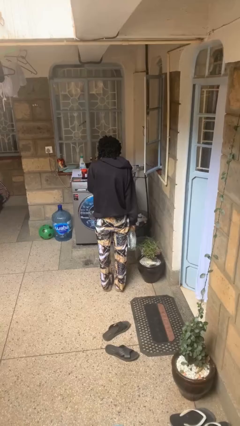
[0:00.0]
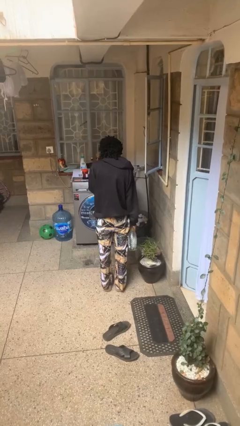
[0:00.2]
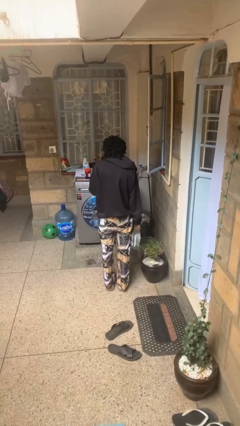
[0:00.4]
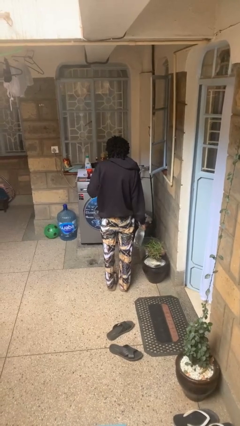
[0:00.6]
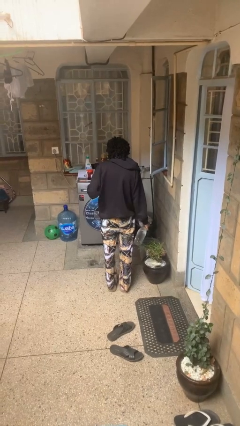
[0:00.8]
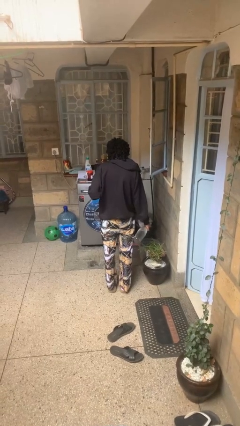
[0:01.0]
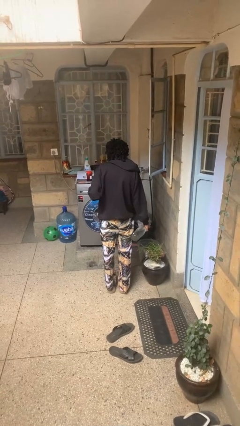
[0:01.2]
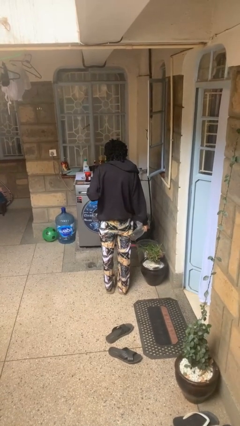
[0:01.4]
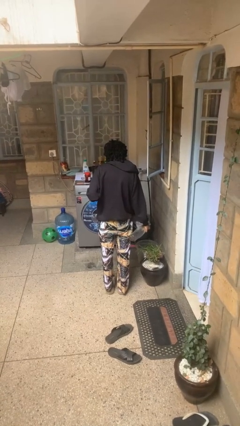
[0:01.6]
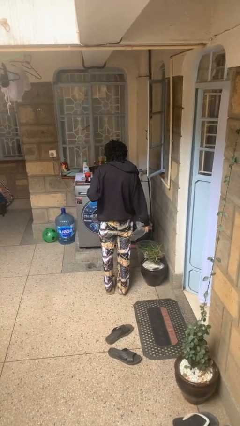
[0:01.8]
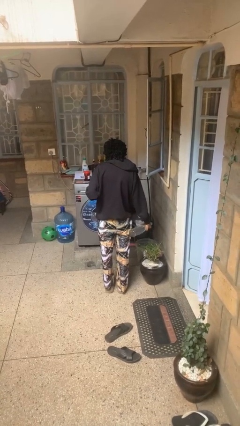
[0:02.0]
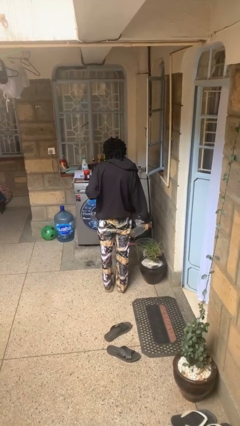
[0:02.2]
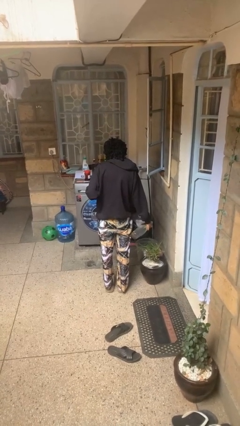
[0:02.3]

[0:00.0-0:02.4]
person waters houseplant

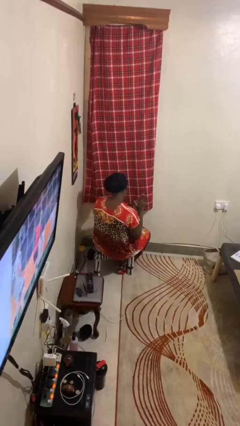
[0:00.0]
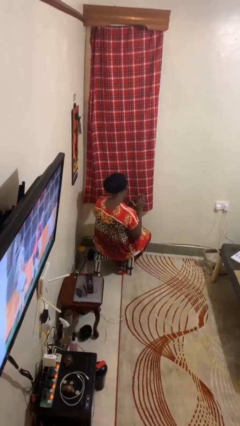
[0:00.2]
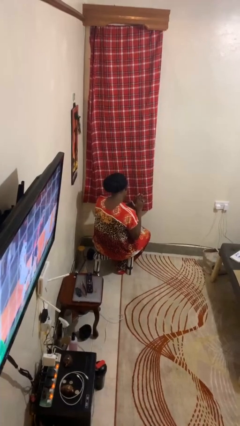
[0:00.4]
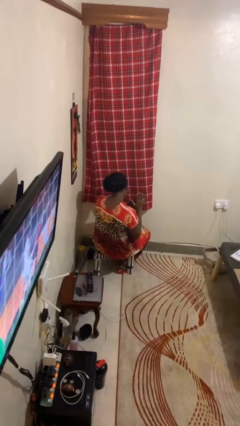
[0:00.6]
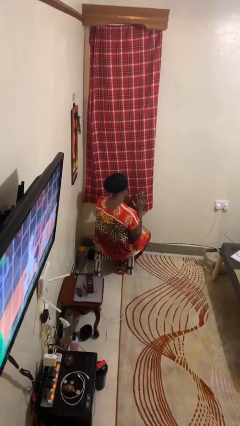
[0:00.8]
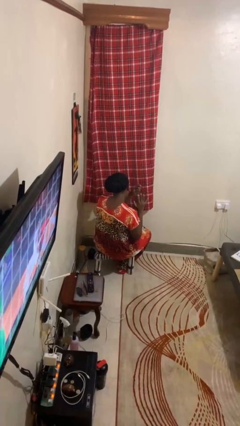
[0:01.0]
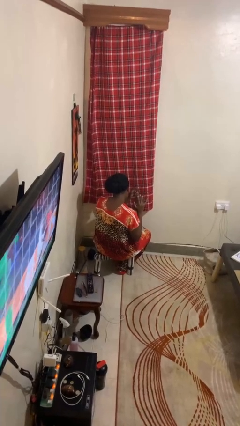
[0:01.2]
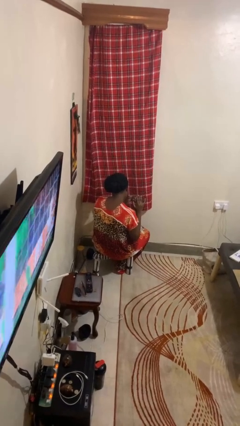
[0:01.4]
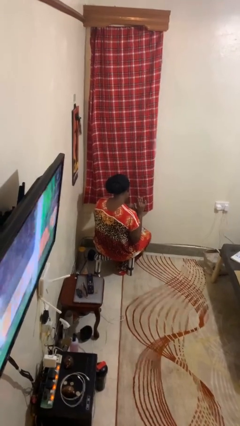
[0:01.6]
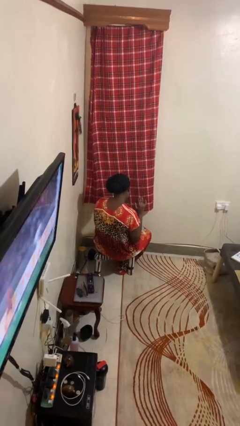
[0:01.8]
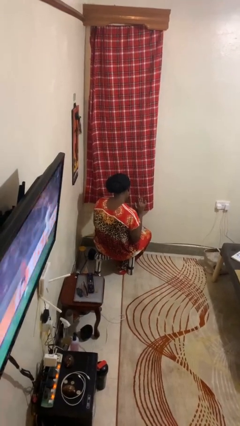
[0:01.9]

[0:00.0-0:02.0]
person takes off ring

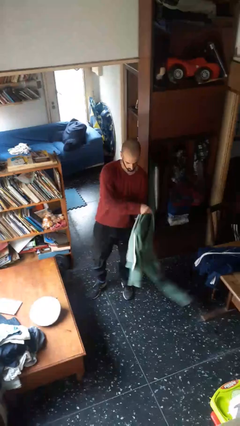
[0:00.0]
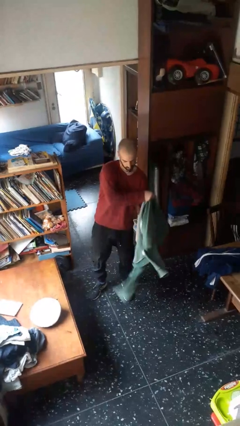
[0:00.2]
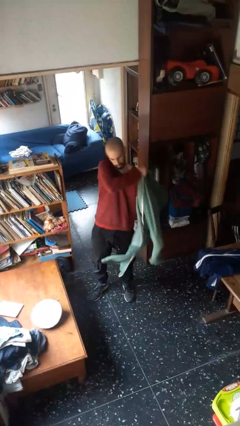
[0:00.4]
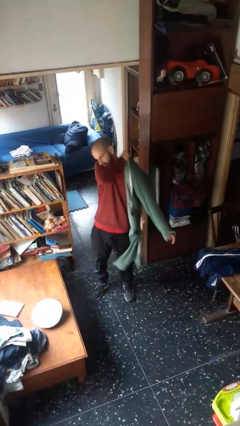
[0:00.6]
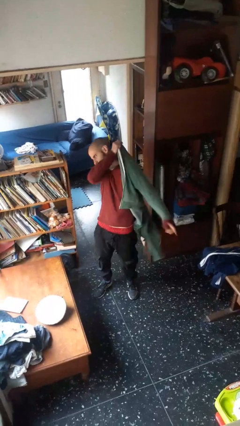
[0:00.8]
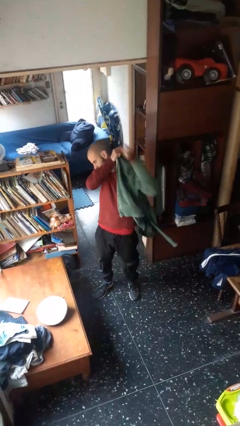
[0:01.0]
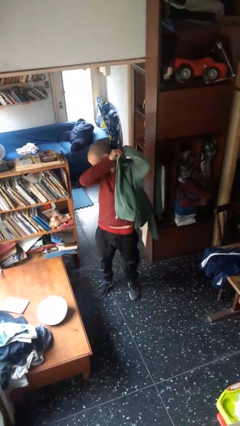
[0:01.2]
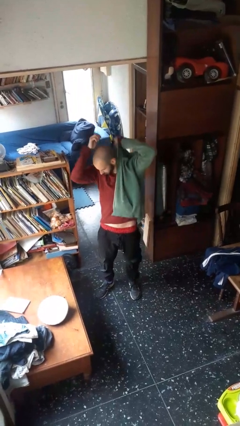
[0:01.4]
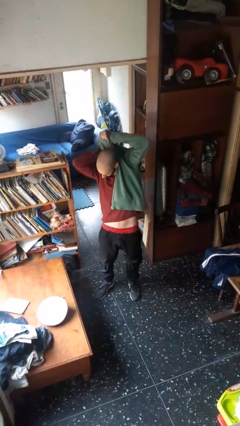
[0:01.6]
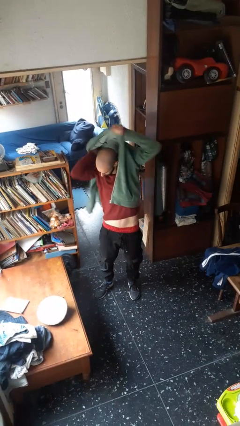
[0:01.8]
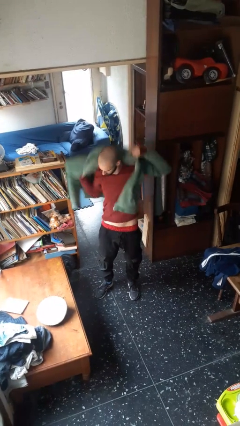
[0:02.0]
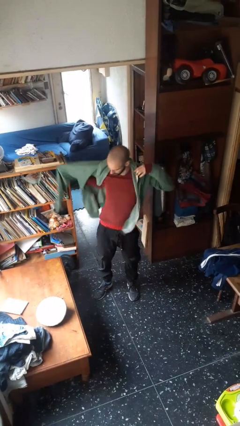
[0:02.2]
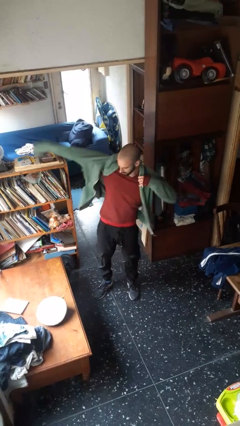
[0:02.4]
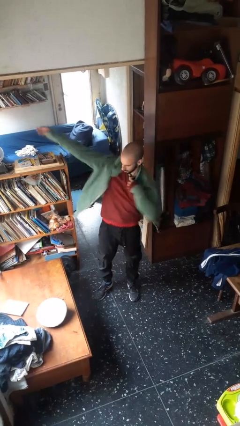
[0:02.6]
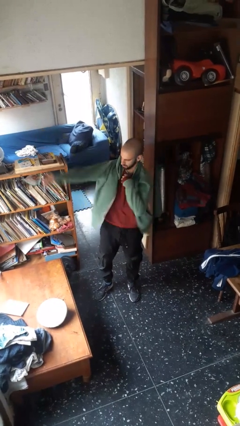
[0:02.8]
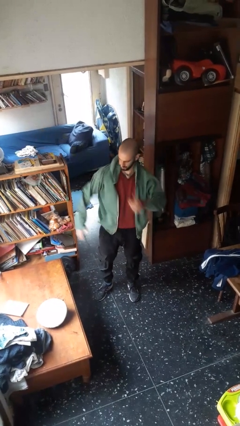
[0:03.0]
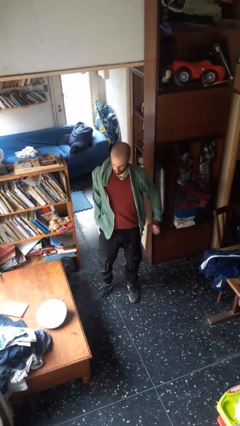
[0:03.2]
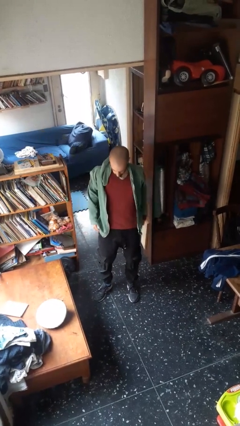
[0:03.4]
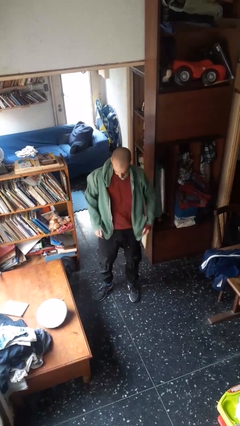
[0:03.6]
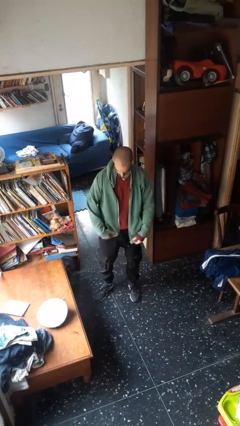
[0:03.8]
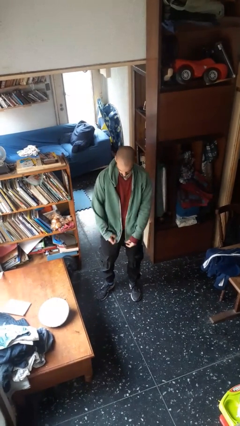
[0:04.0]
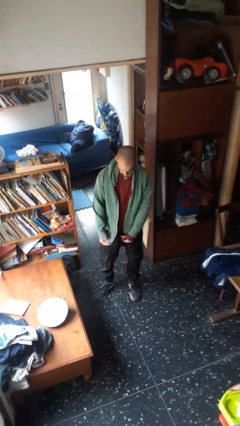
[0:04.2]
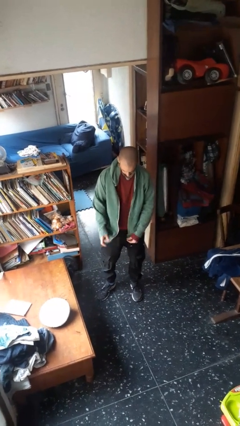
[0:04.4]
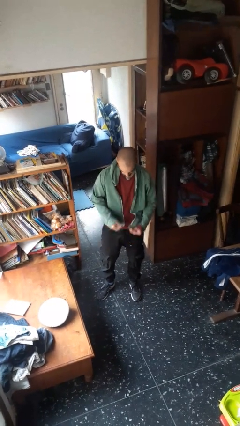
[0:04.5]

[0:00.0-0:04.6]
person puts on jacket

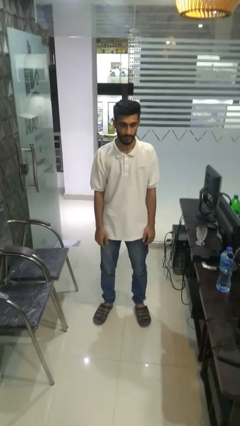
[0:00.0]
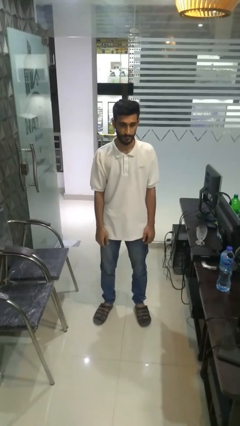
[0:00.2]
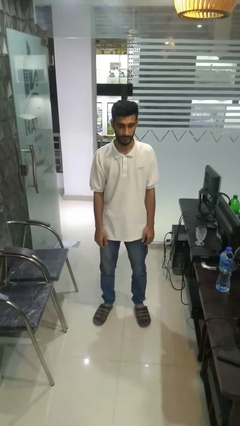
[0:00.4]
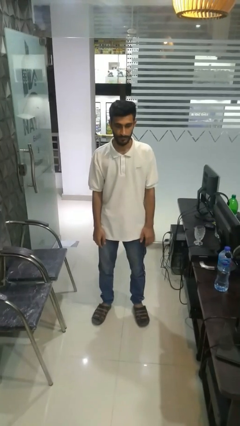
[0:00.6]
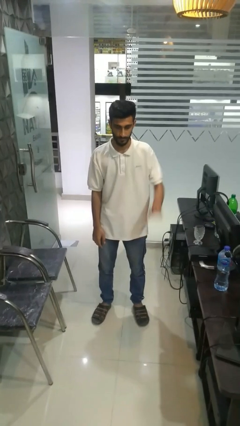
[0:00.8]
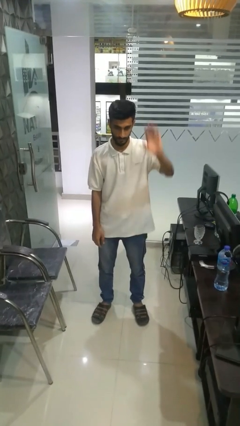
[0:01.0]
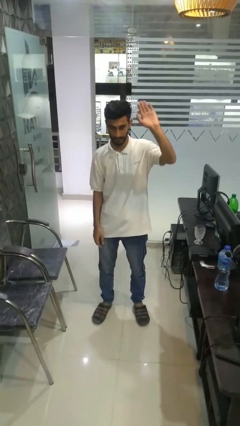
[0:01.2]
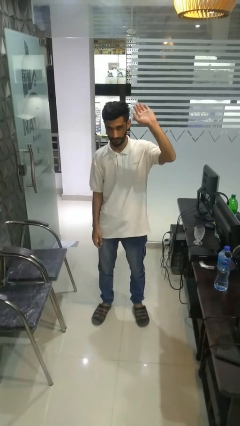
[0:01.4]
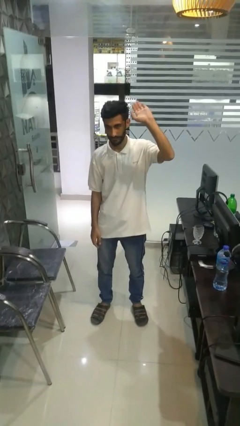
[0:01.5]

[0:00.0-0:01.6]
person gestures raise hand

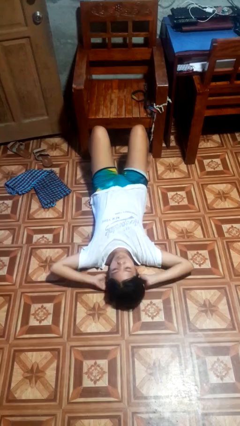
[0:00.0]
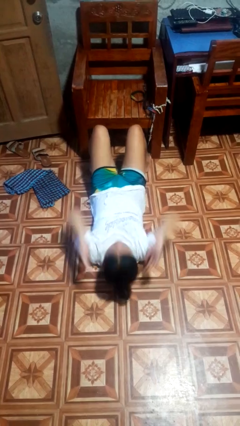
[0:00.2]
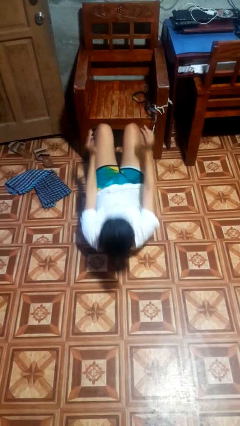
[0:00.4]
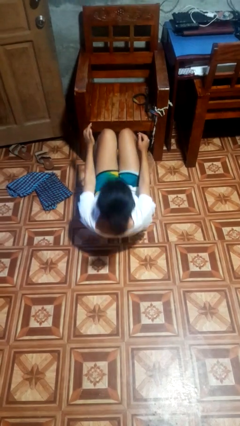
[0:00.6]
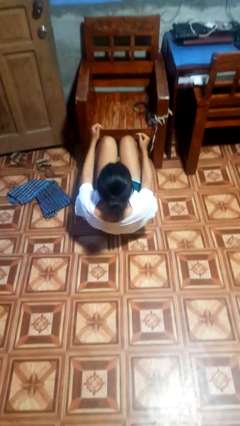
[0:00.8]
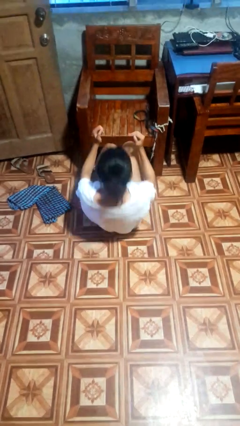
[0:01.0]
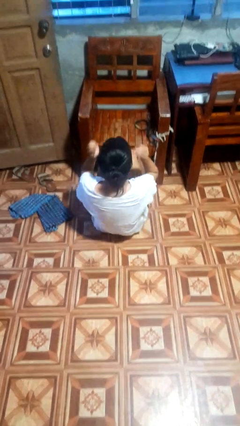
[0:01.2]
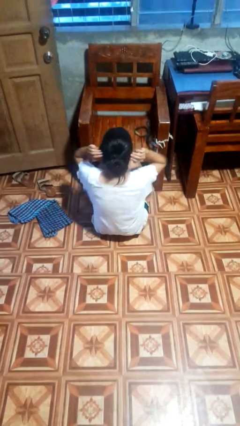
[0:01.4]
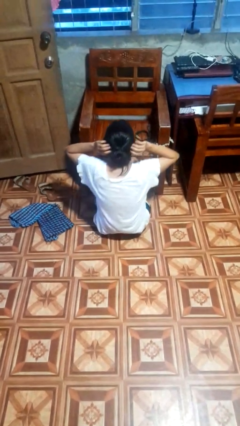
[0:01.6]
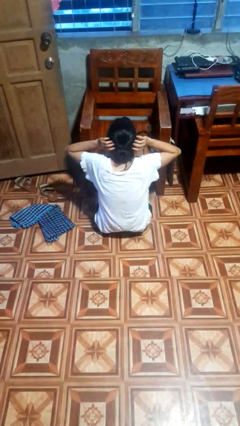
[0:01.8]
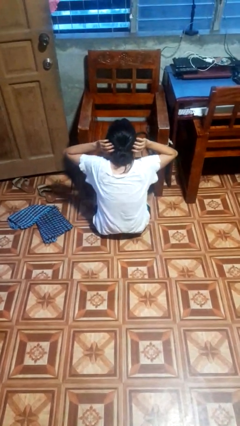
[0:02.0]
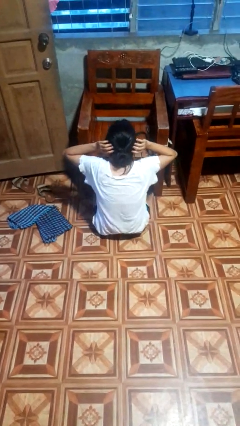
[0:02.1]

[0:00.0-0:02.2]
person exercises with situp

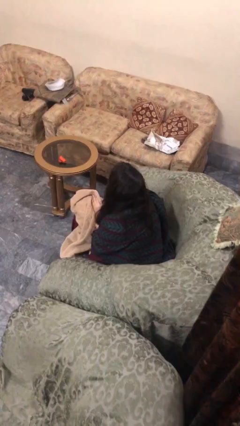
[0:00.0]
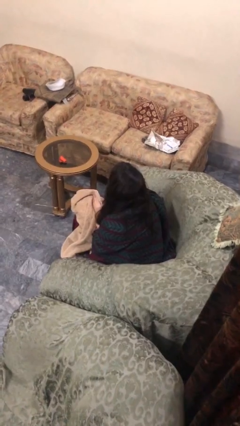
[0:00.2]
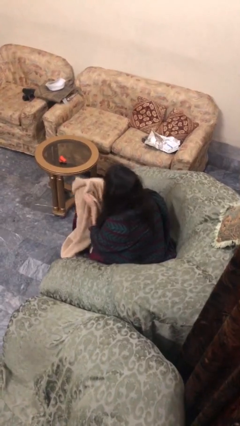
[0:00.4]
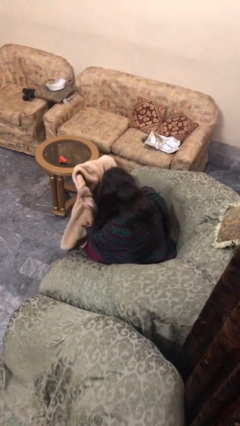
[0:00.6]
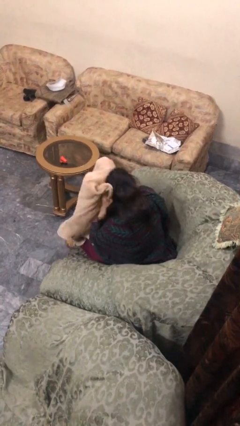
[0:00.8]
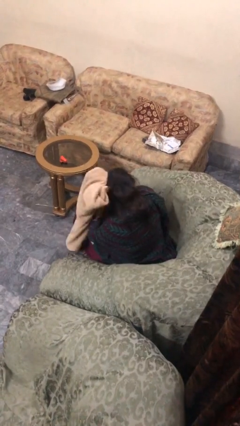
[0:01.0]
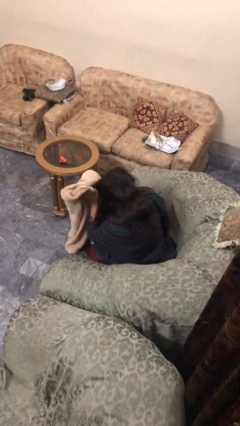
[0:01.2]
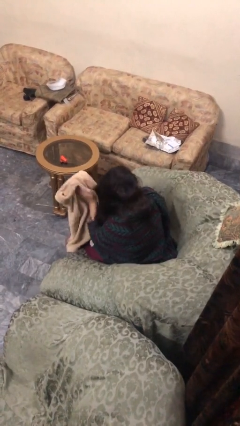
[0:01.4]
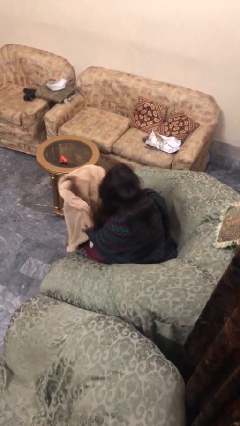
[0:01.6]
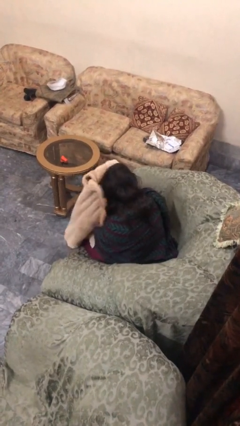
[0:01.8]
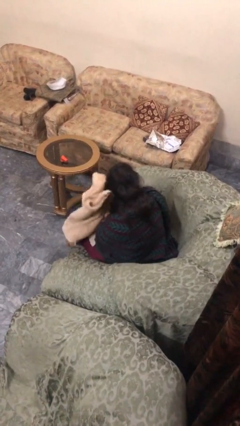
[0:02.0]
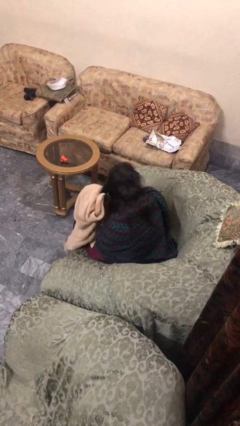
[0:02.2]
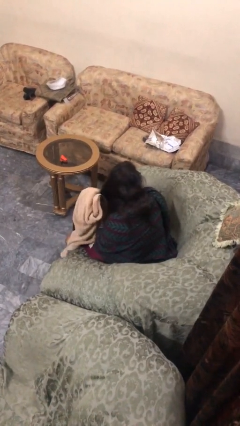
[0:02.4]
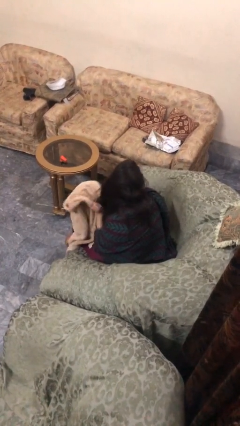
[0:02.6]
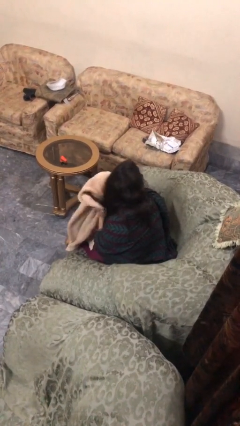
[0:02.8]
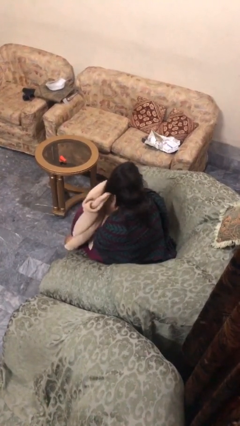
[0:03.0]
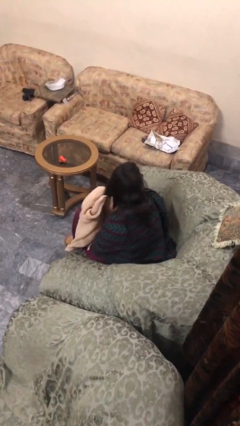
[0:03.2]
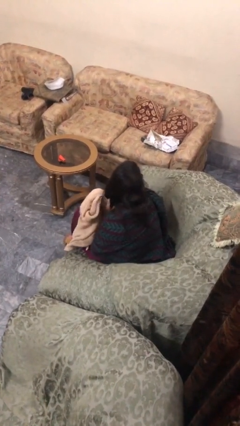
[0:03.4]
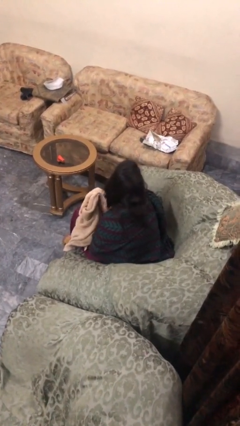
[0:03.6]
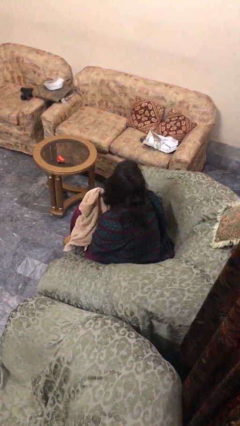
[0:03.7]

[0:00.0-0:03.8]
person dries hair with towel

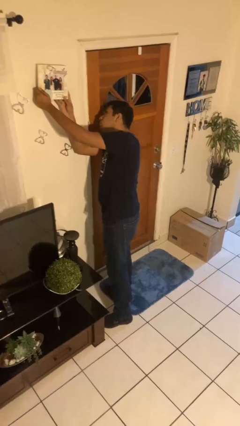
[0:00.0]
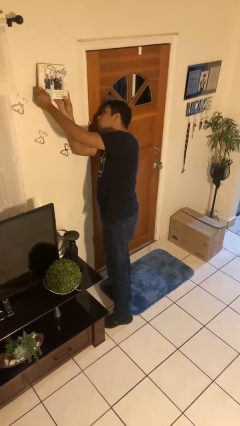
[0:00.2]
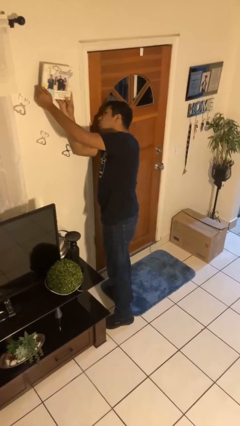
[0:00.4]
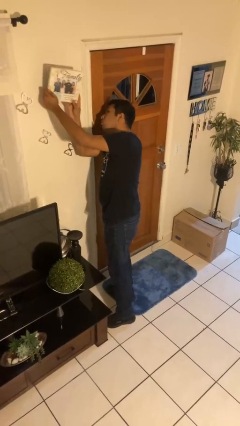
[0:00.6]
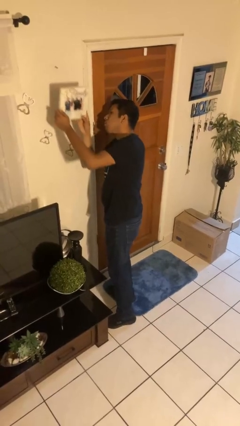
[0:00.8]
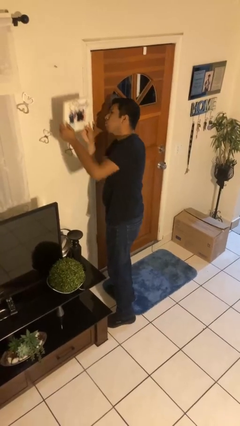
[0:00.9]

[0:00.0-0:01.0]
person takes down picture frame
